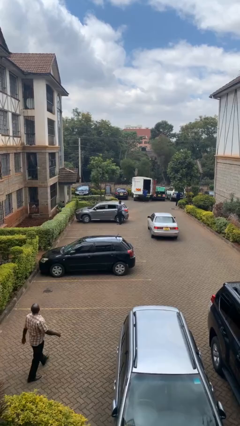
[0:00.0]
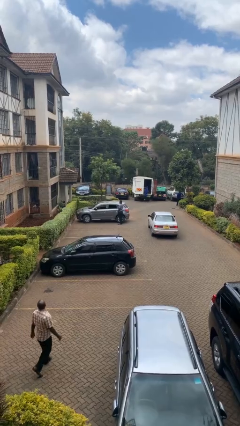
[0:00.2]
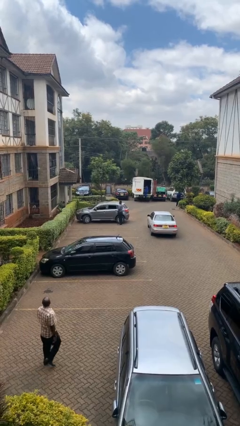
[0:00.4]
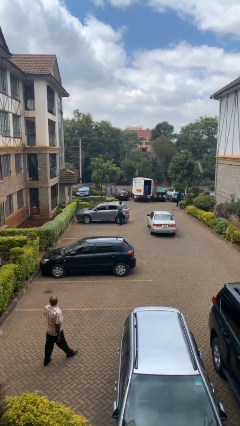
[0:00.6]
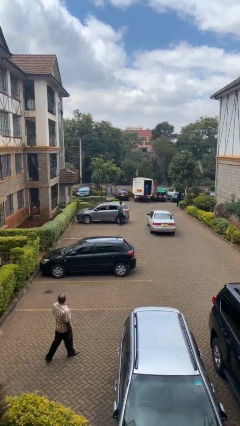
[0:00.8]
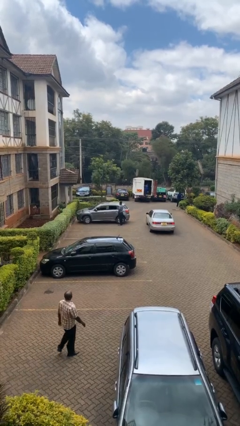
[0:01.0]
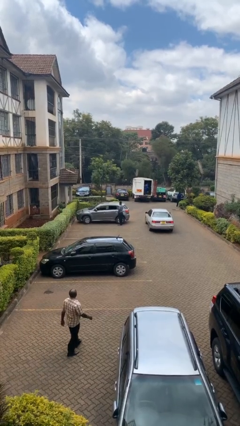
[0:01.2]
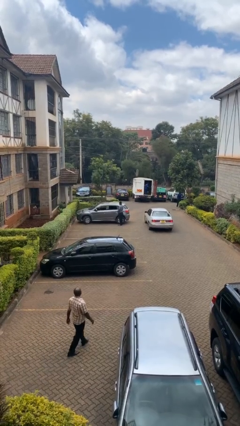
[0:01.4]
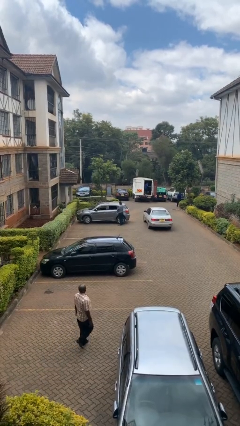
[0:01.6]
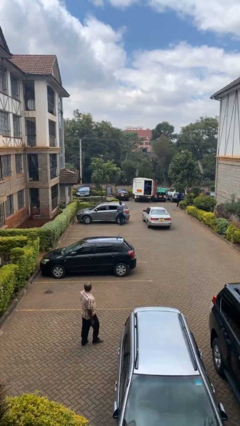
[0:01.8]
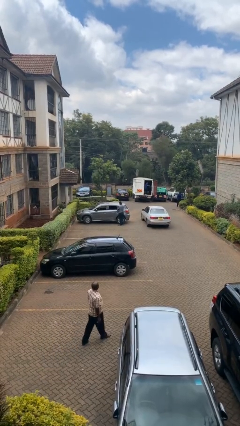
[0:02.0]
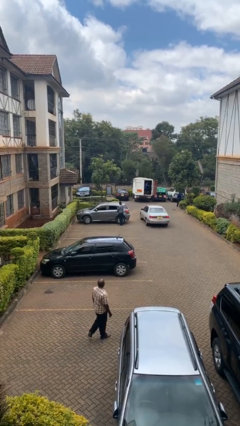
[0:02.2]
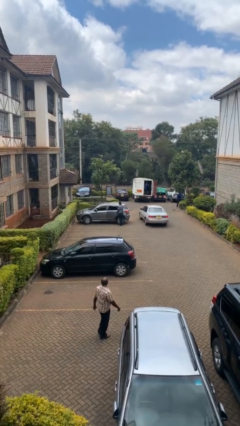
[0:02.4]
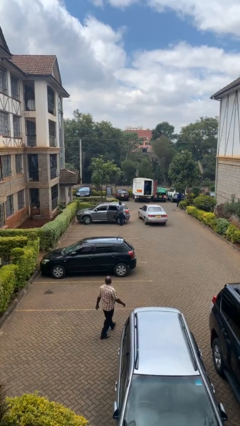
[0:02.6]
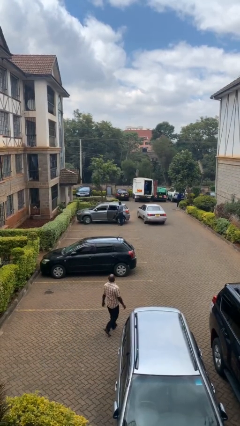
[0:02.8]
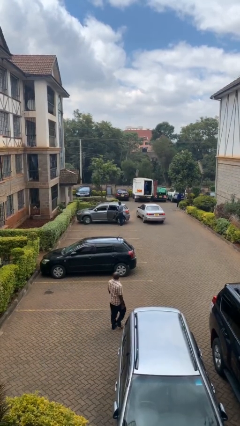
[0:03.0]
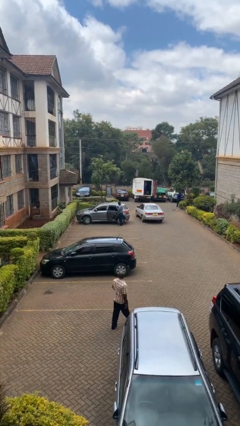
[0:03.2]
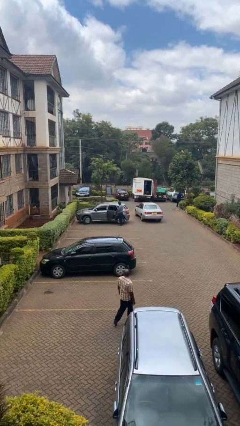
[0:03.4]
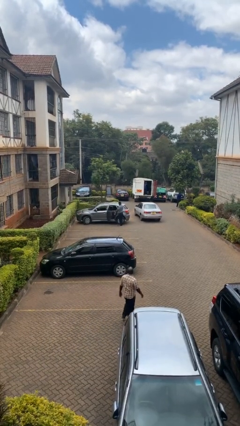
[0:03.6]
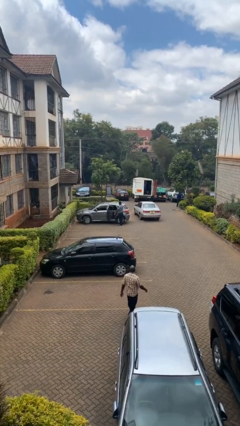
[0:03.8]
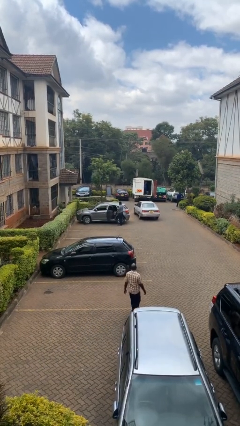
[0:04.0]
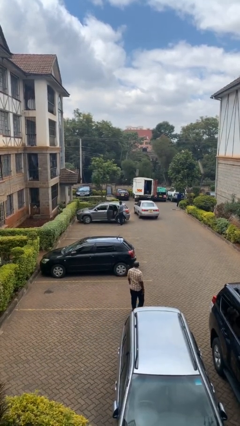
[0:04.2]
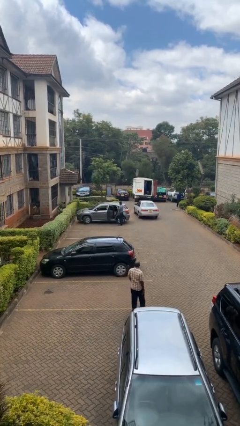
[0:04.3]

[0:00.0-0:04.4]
person opens car door

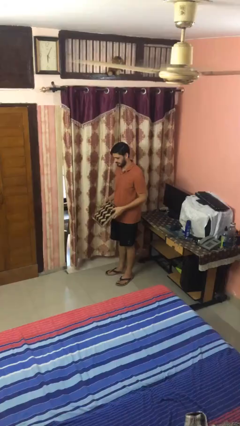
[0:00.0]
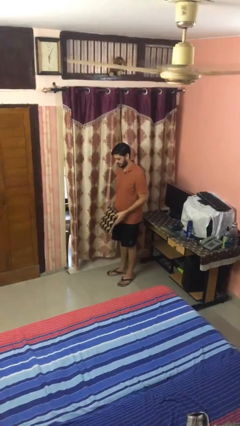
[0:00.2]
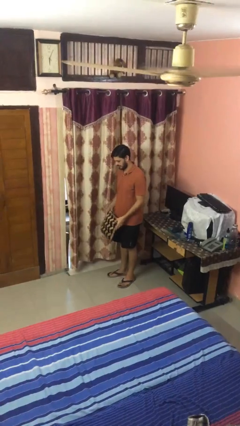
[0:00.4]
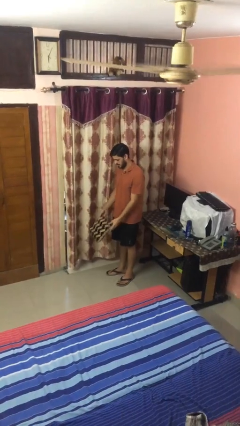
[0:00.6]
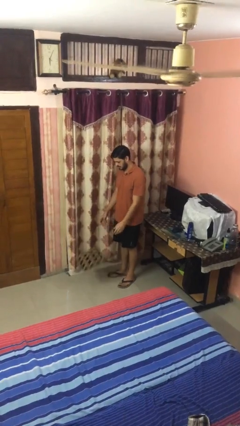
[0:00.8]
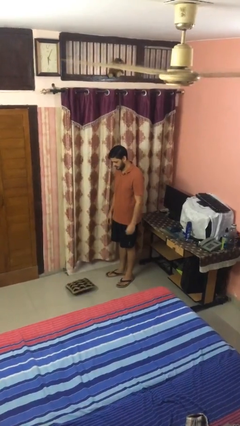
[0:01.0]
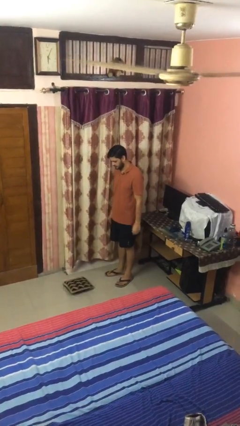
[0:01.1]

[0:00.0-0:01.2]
person throws object to ground

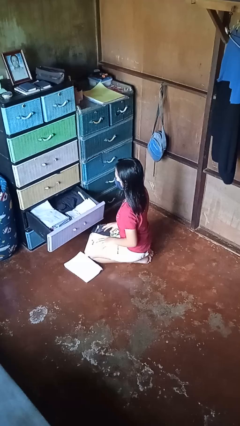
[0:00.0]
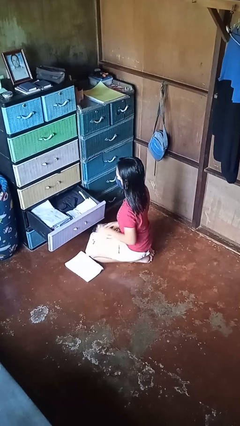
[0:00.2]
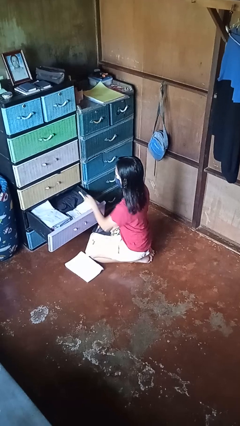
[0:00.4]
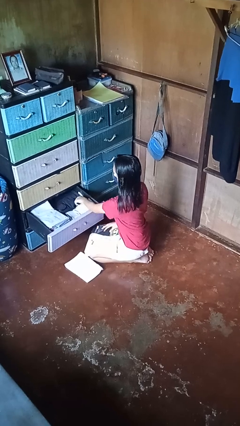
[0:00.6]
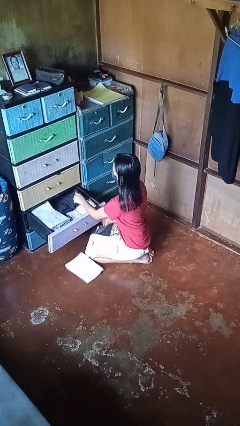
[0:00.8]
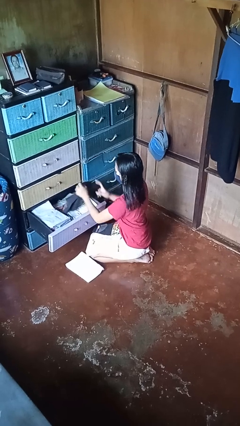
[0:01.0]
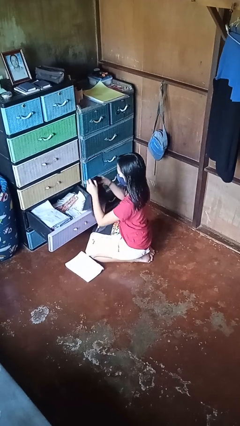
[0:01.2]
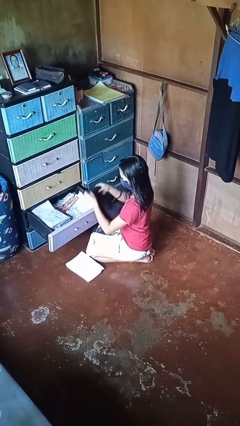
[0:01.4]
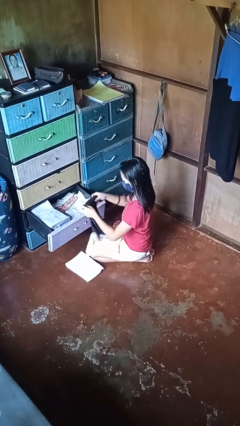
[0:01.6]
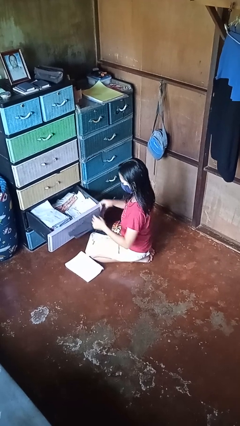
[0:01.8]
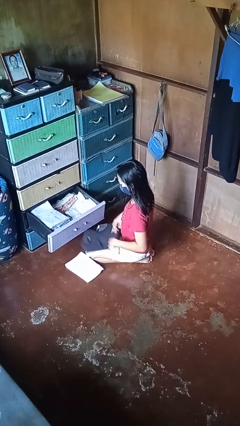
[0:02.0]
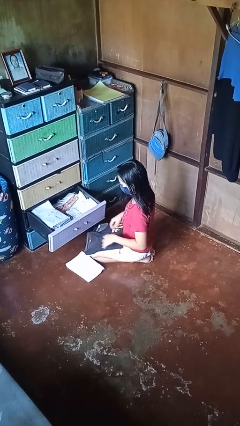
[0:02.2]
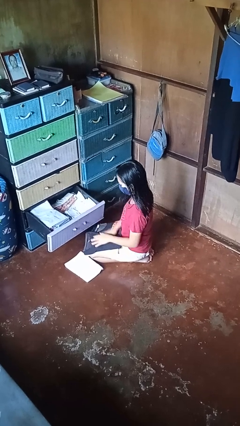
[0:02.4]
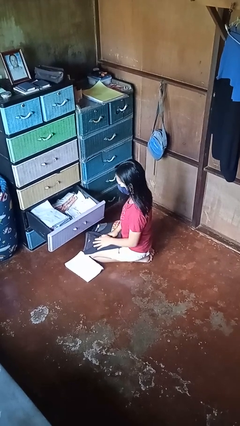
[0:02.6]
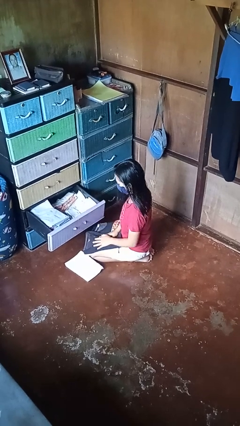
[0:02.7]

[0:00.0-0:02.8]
person takes clothes from dresser

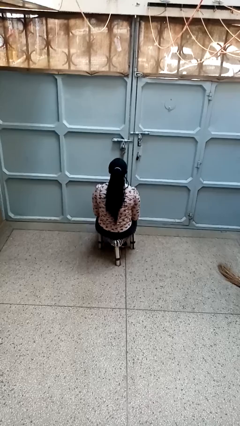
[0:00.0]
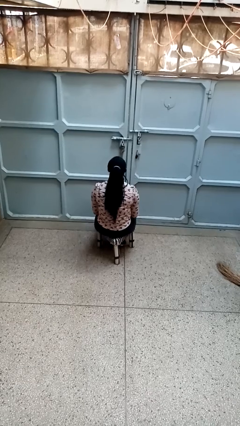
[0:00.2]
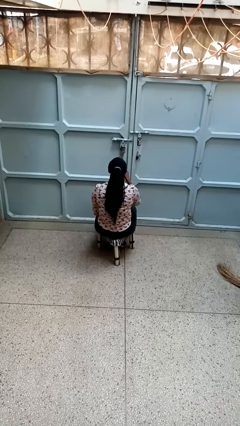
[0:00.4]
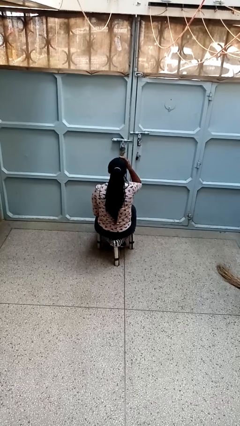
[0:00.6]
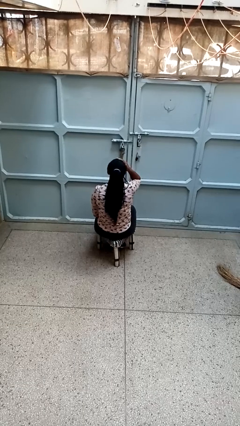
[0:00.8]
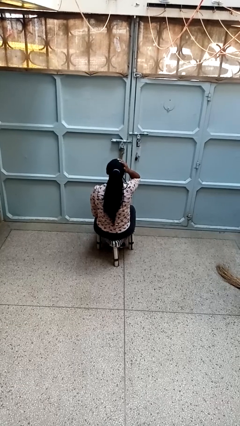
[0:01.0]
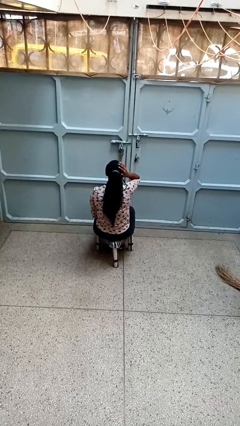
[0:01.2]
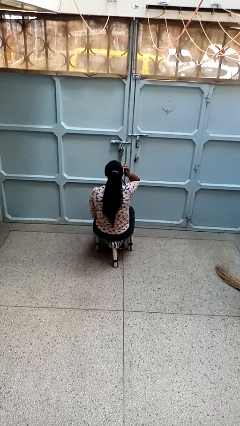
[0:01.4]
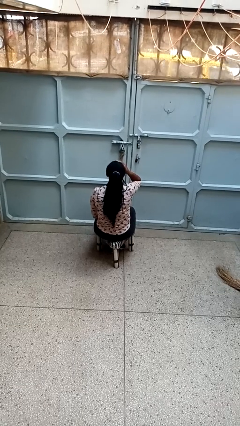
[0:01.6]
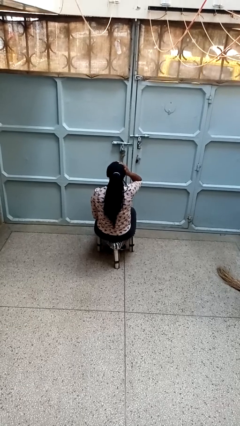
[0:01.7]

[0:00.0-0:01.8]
person strokes hair

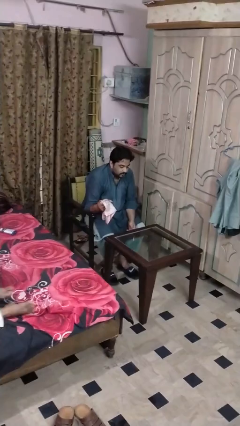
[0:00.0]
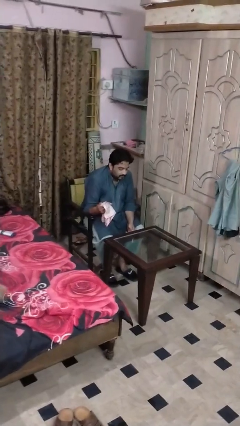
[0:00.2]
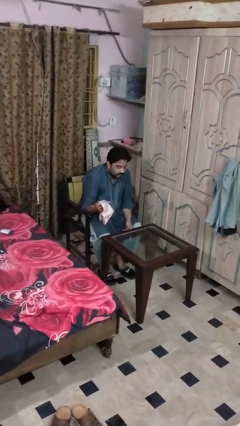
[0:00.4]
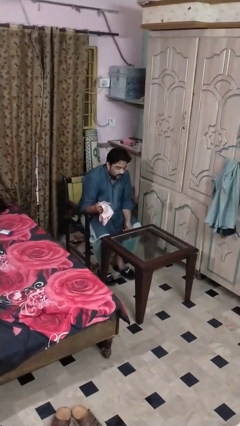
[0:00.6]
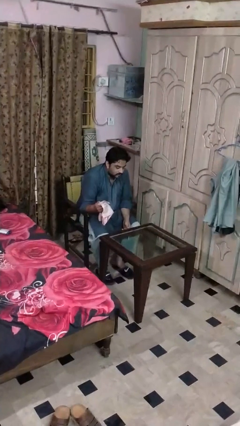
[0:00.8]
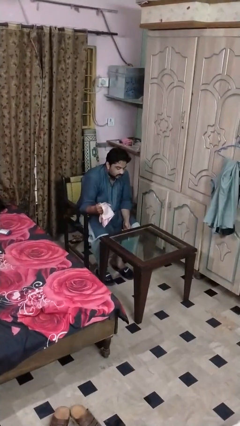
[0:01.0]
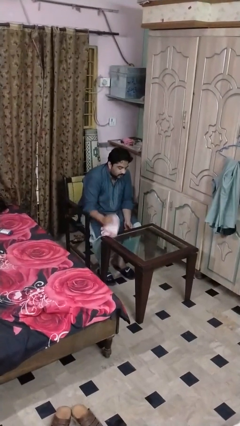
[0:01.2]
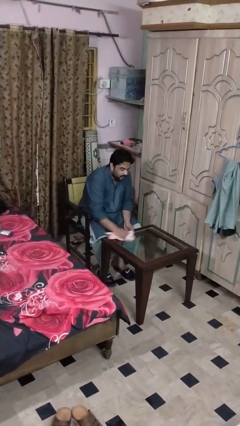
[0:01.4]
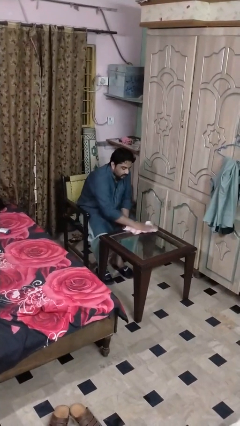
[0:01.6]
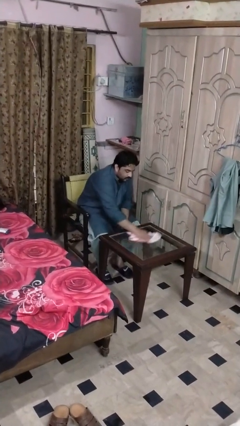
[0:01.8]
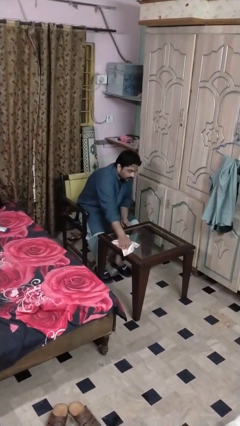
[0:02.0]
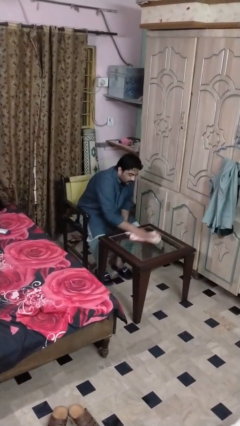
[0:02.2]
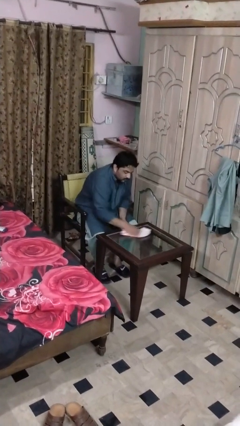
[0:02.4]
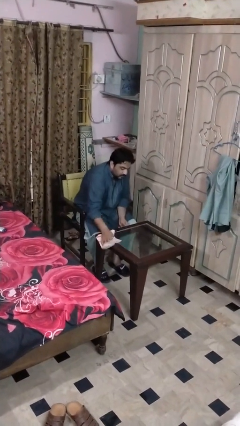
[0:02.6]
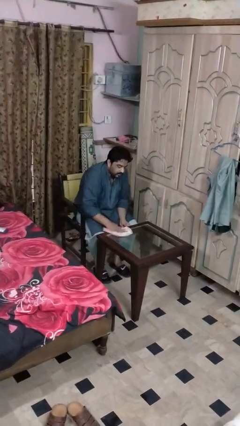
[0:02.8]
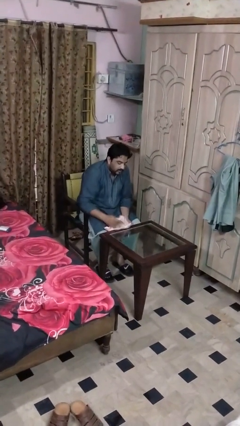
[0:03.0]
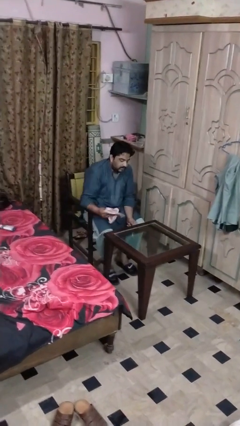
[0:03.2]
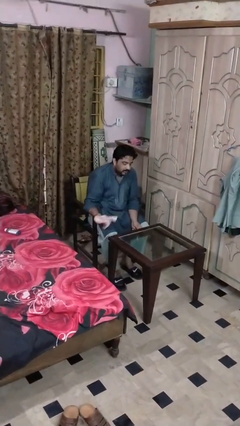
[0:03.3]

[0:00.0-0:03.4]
person cleans table with rag

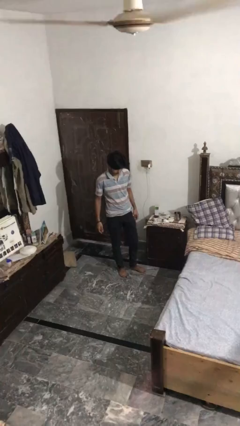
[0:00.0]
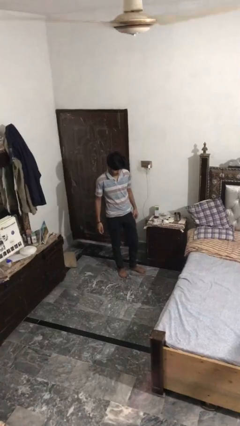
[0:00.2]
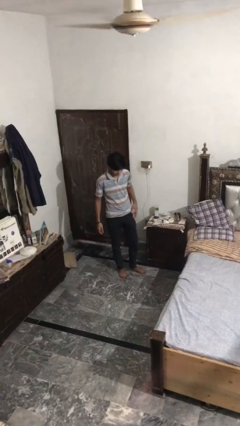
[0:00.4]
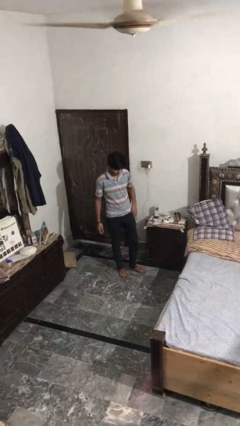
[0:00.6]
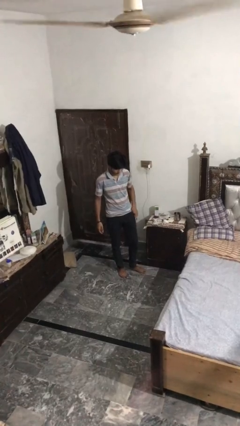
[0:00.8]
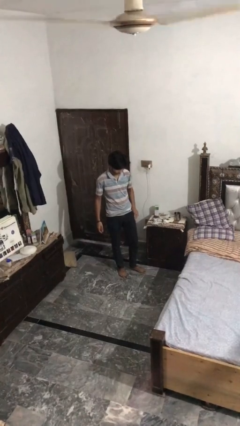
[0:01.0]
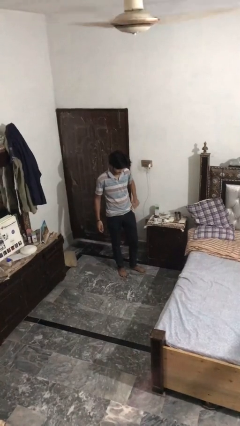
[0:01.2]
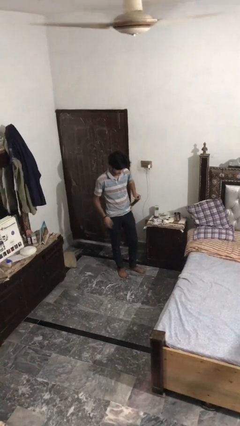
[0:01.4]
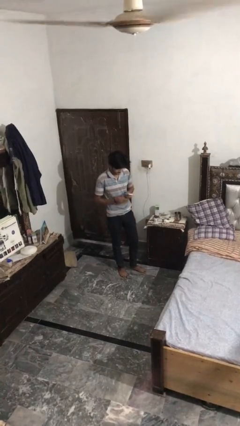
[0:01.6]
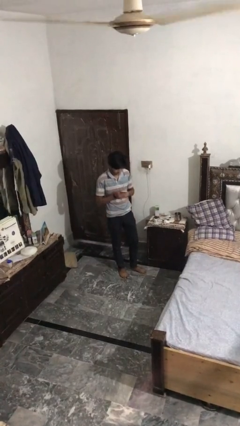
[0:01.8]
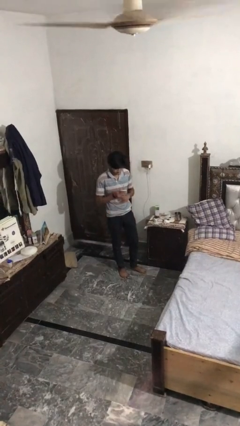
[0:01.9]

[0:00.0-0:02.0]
person takes phone from pocket

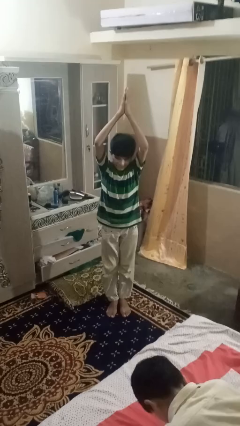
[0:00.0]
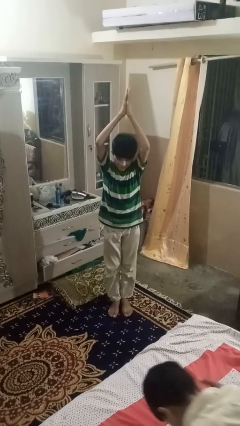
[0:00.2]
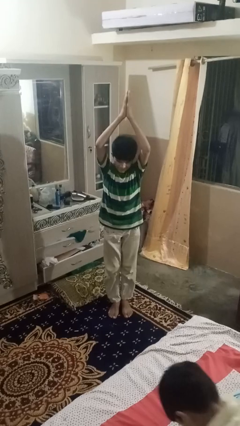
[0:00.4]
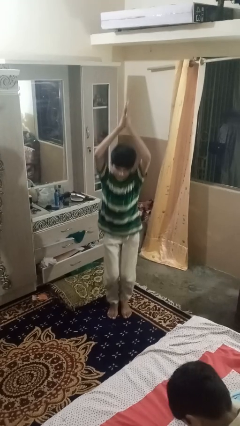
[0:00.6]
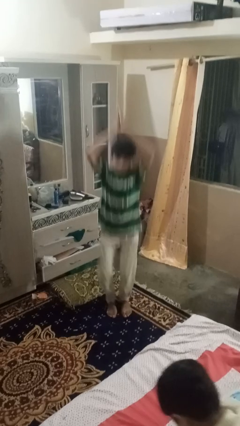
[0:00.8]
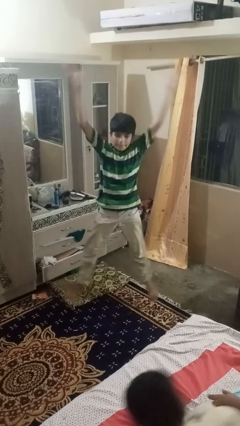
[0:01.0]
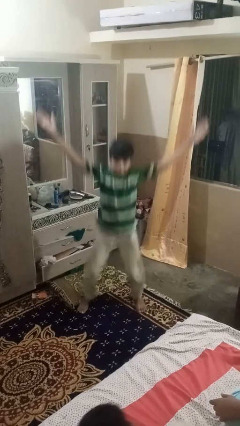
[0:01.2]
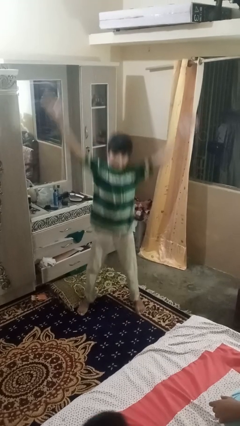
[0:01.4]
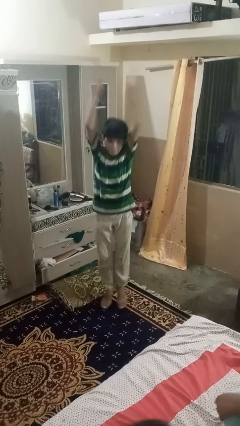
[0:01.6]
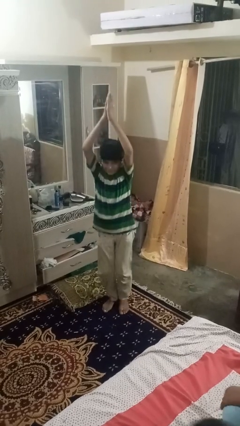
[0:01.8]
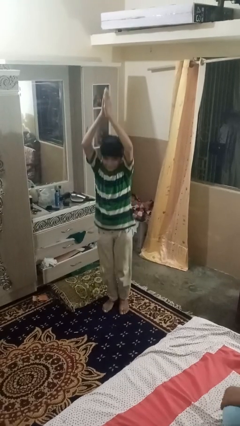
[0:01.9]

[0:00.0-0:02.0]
person exercises with jumping jacks
